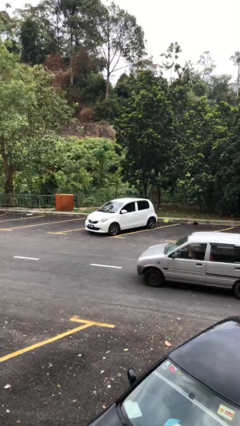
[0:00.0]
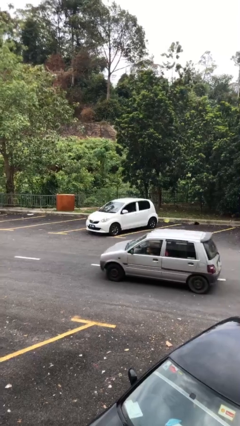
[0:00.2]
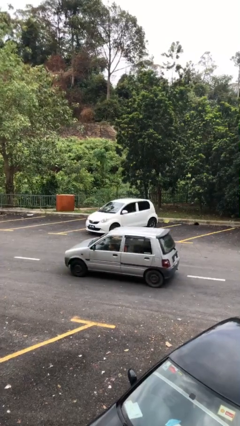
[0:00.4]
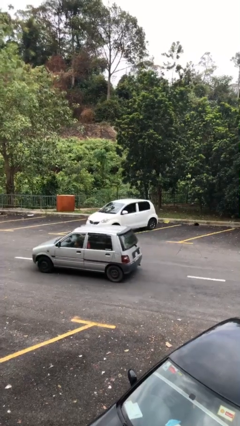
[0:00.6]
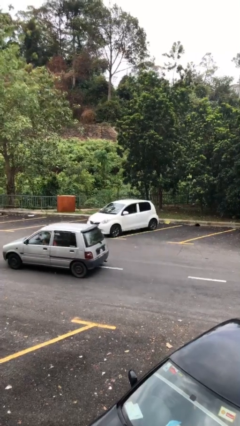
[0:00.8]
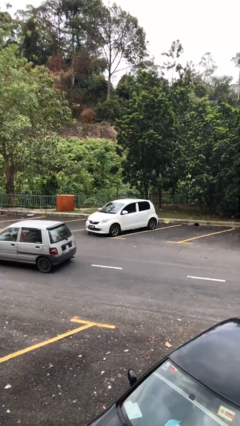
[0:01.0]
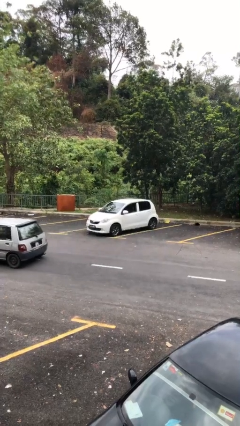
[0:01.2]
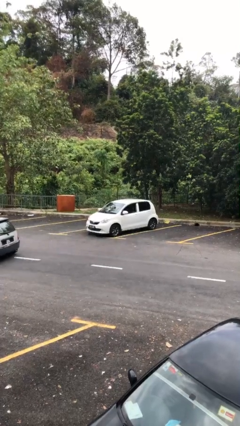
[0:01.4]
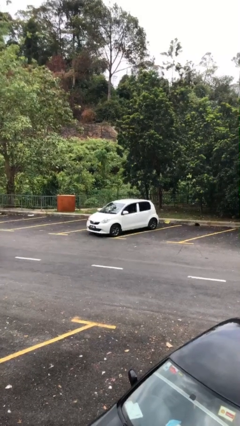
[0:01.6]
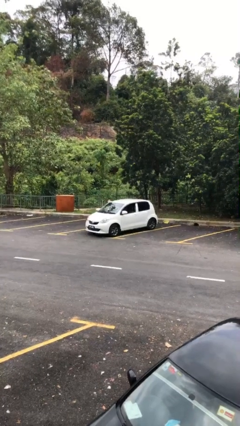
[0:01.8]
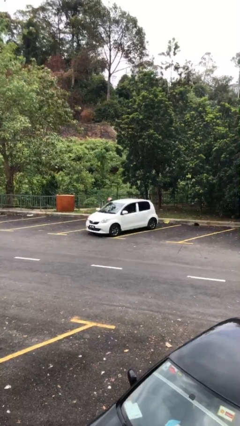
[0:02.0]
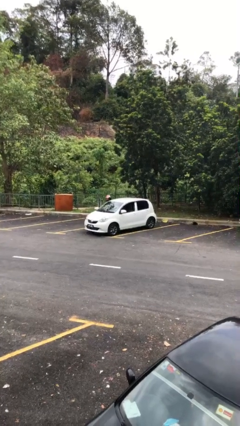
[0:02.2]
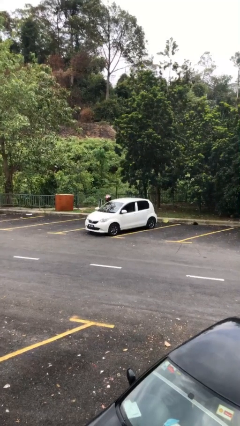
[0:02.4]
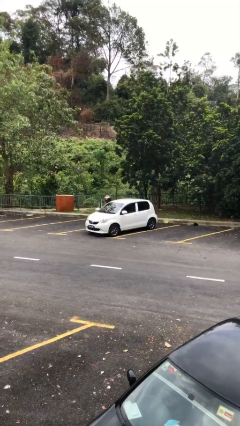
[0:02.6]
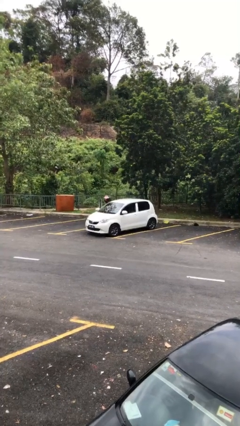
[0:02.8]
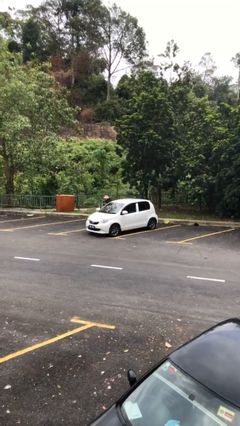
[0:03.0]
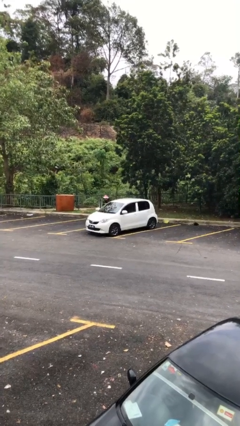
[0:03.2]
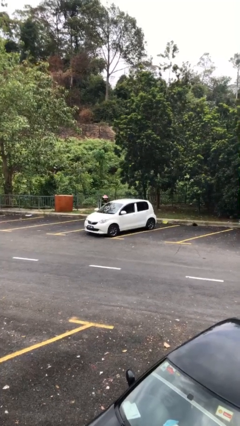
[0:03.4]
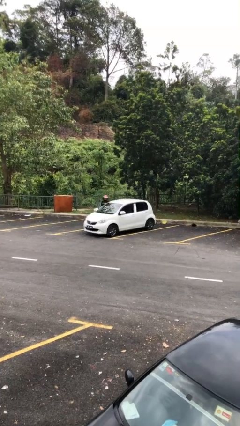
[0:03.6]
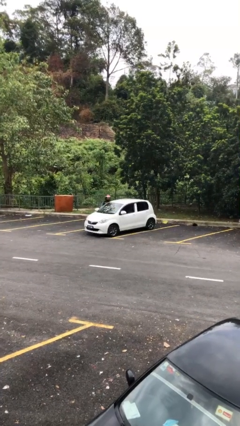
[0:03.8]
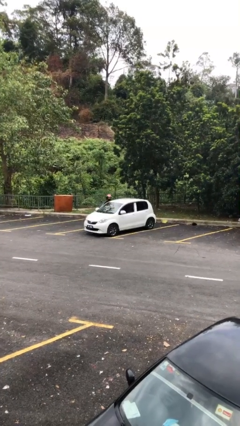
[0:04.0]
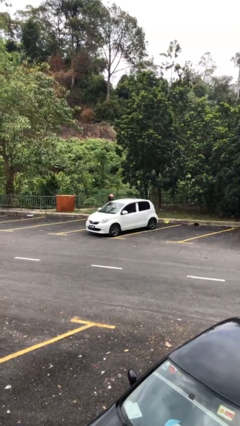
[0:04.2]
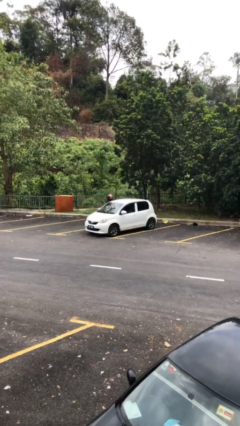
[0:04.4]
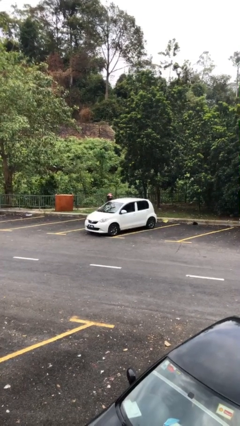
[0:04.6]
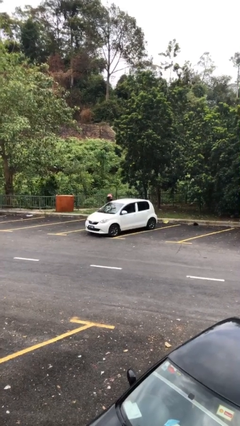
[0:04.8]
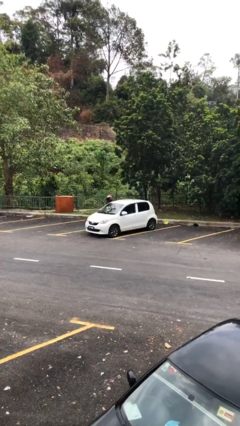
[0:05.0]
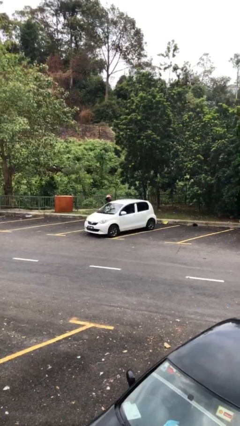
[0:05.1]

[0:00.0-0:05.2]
car drops off person

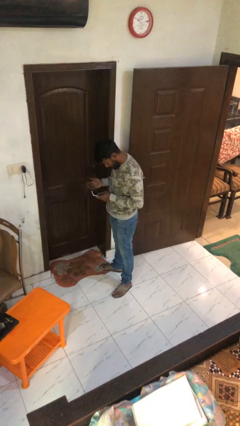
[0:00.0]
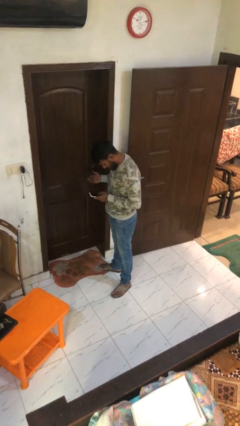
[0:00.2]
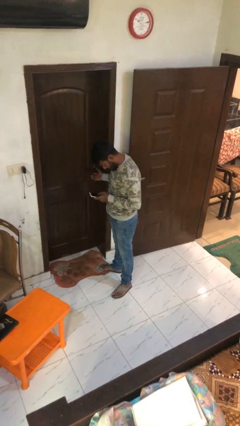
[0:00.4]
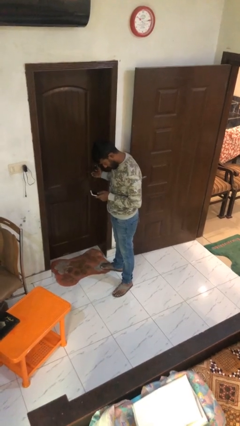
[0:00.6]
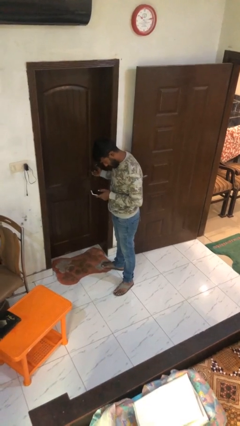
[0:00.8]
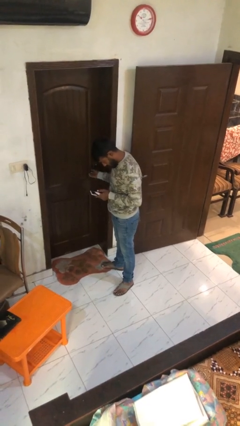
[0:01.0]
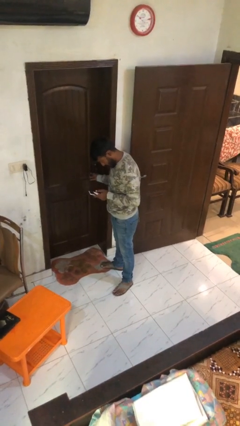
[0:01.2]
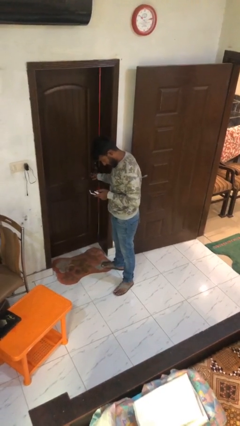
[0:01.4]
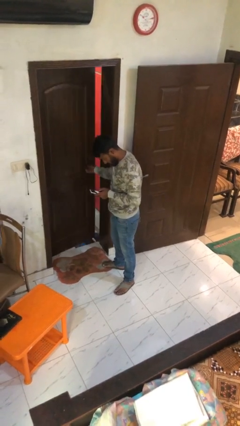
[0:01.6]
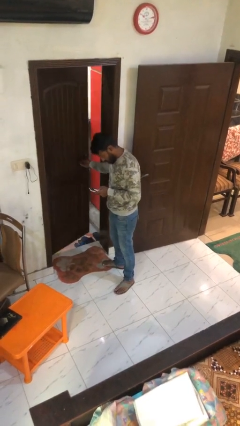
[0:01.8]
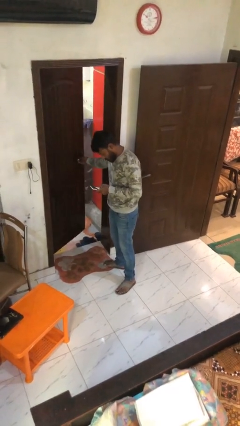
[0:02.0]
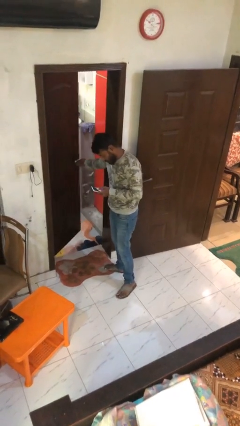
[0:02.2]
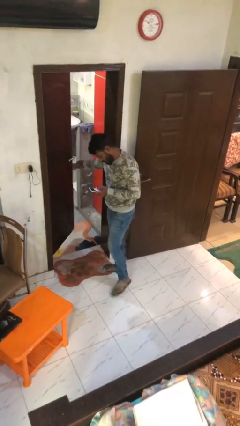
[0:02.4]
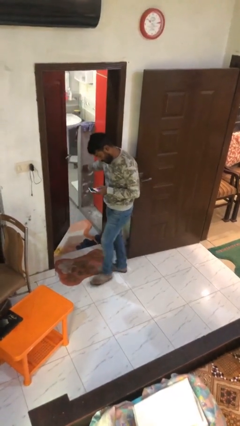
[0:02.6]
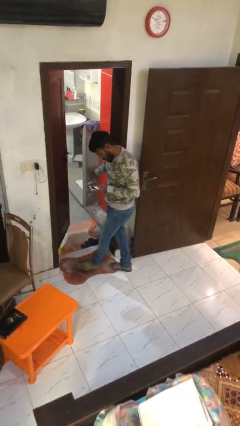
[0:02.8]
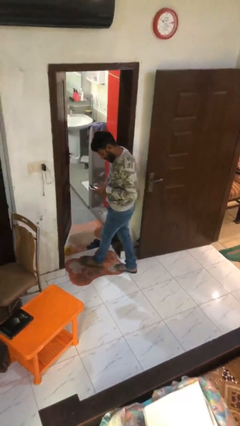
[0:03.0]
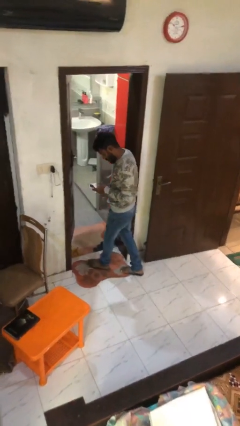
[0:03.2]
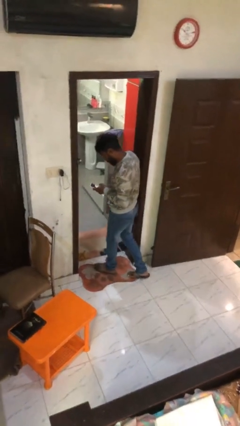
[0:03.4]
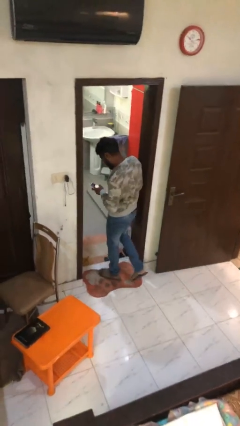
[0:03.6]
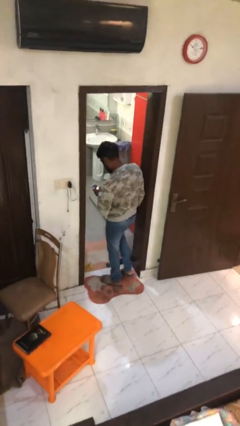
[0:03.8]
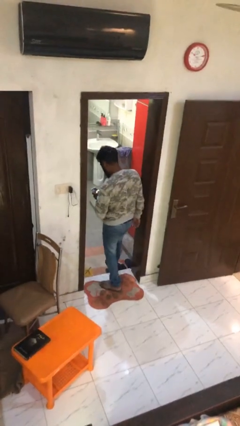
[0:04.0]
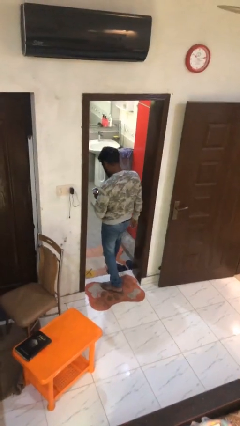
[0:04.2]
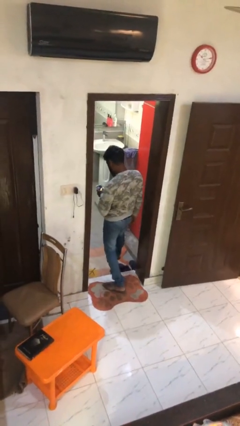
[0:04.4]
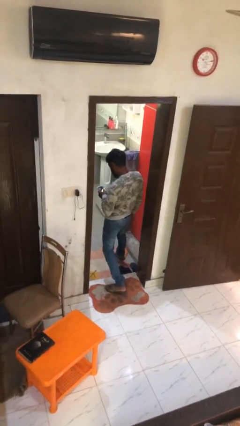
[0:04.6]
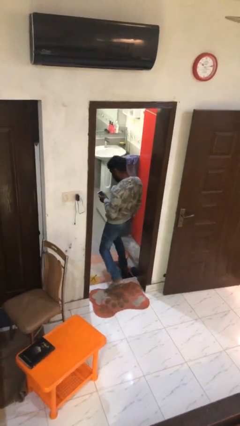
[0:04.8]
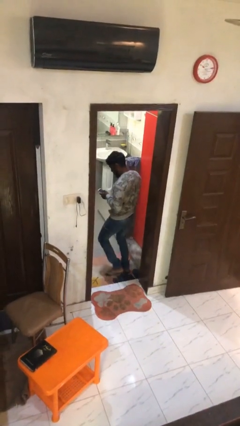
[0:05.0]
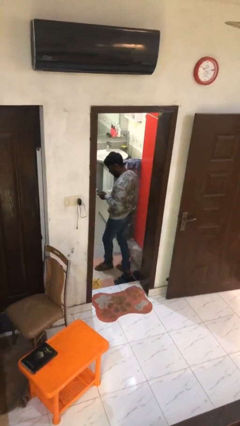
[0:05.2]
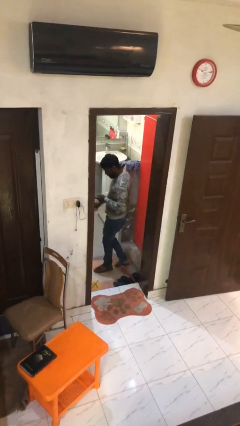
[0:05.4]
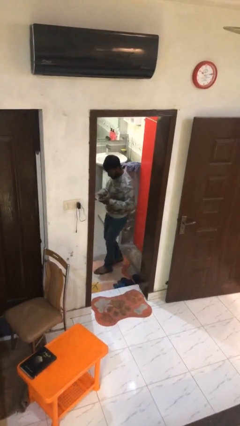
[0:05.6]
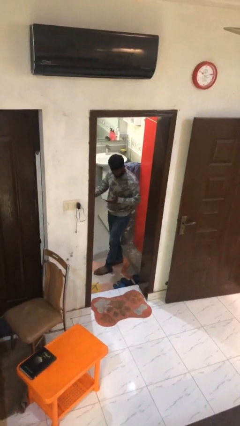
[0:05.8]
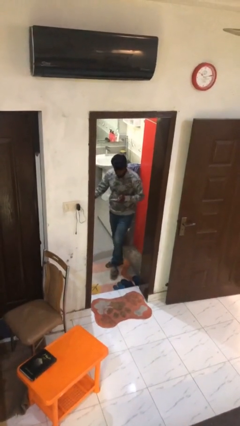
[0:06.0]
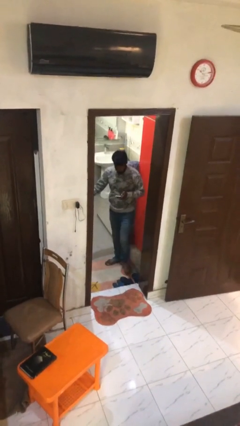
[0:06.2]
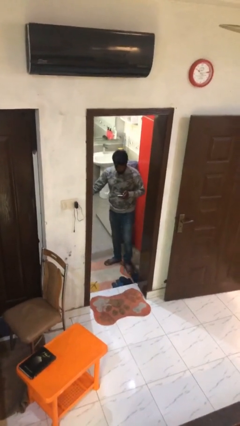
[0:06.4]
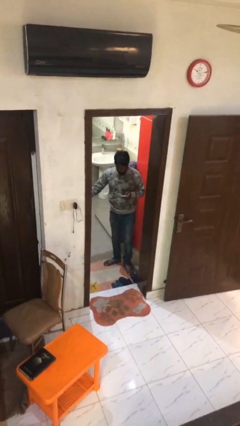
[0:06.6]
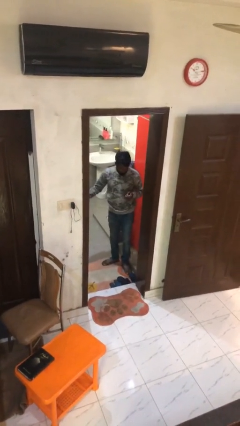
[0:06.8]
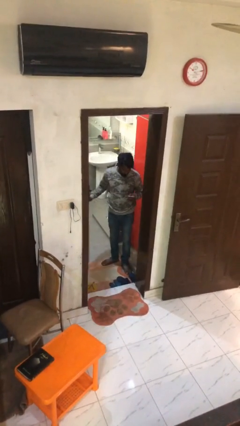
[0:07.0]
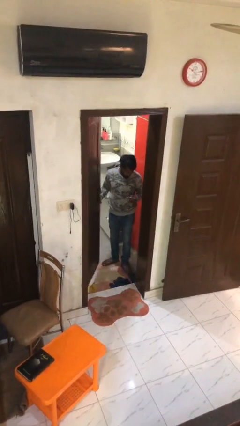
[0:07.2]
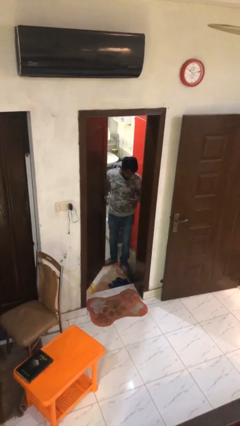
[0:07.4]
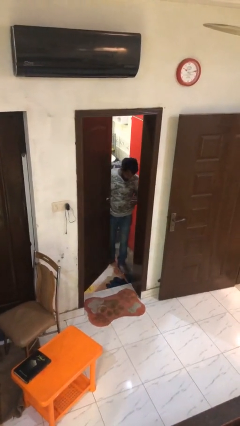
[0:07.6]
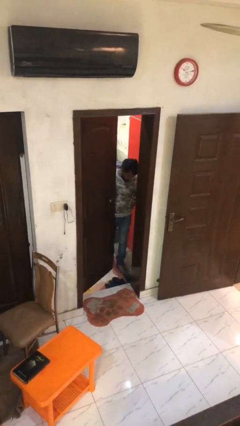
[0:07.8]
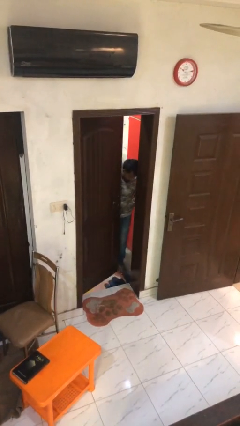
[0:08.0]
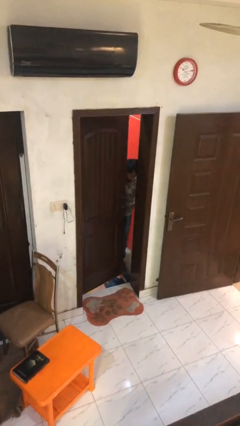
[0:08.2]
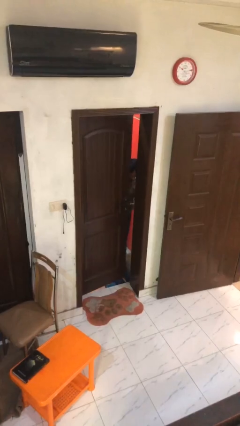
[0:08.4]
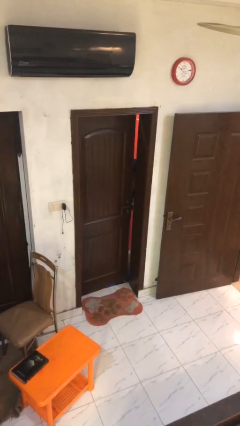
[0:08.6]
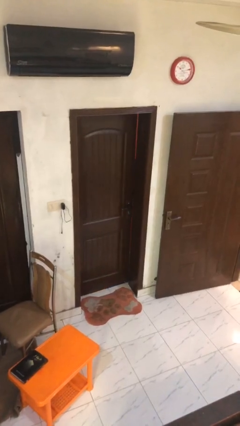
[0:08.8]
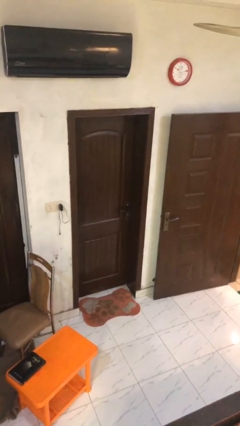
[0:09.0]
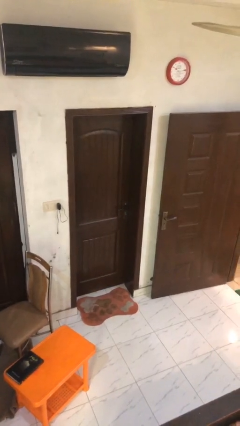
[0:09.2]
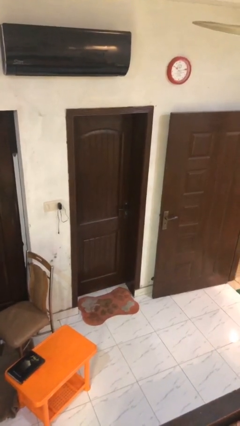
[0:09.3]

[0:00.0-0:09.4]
person texts on phone

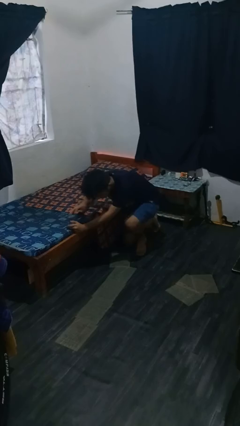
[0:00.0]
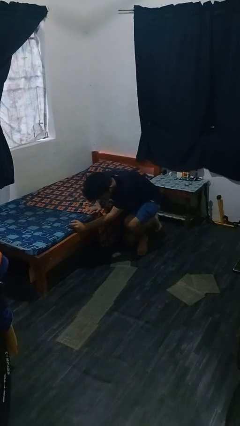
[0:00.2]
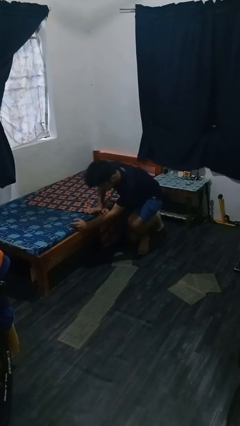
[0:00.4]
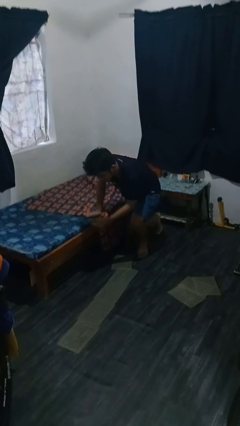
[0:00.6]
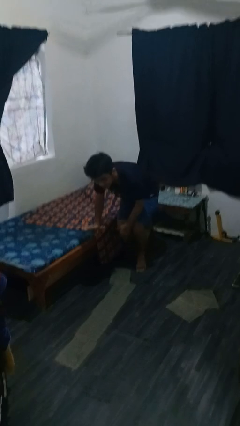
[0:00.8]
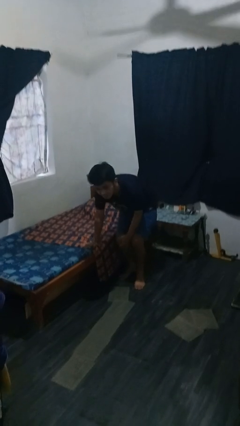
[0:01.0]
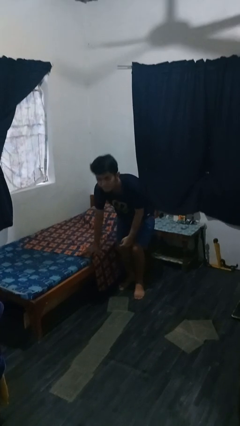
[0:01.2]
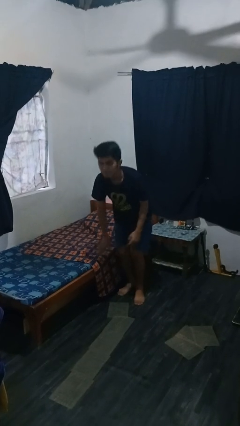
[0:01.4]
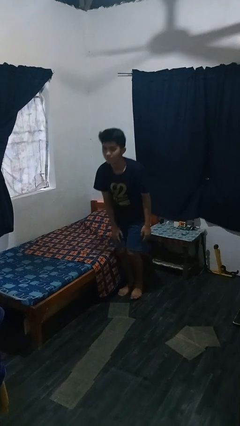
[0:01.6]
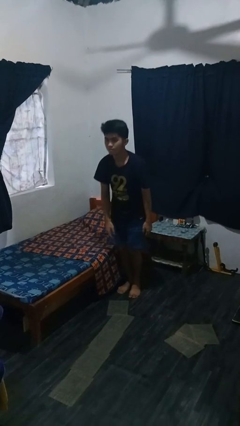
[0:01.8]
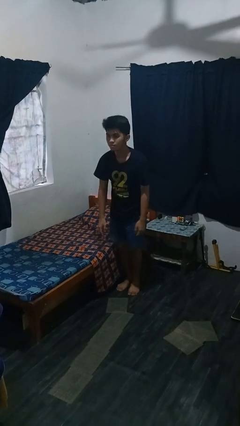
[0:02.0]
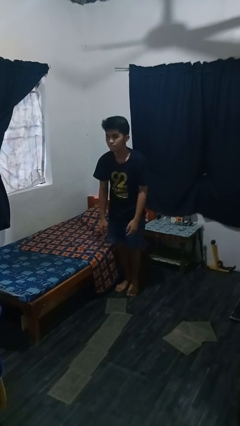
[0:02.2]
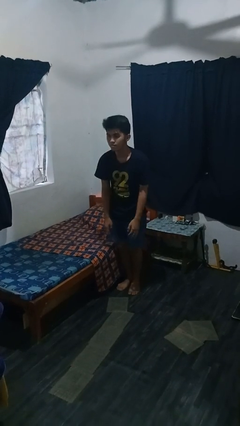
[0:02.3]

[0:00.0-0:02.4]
person stands up from floor

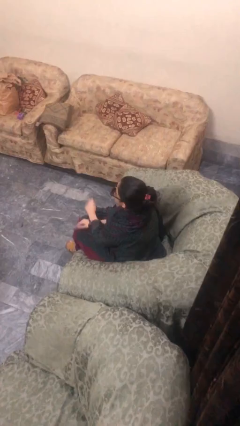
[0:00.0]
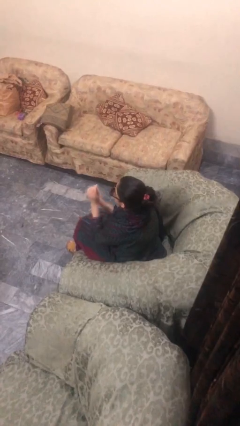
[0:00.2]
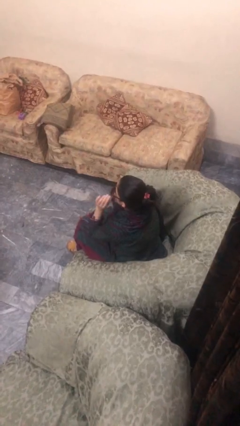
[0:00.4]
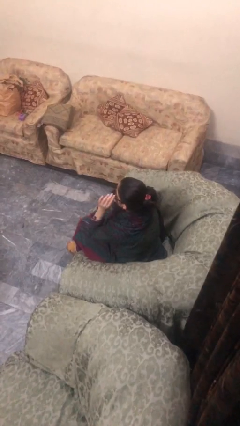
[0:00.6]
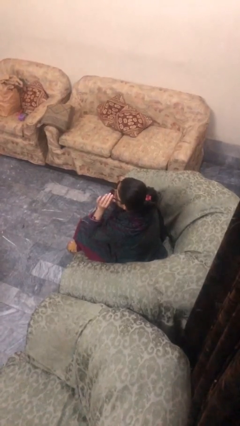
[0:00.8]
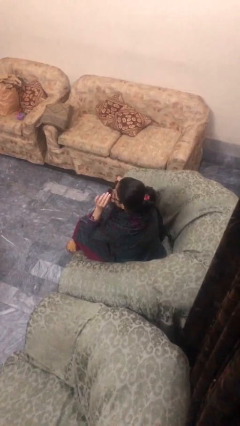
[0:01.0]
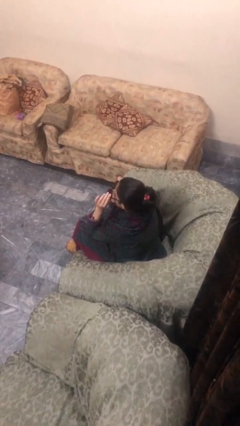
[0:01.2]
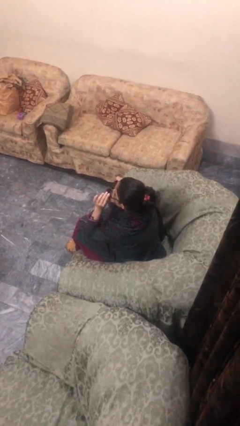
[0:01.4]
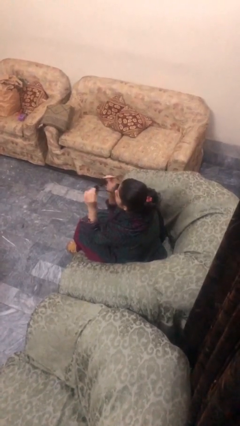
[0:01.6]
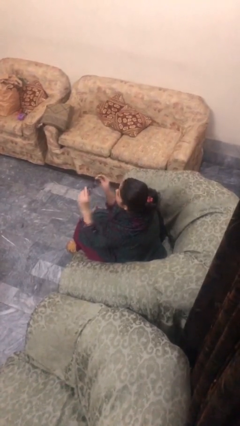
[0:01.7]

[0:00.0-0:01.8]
person takes off sunglasses
